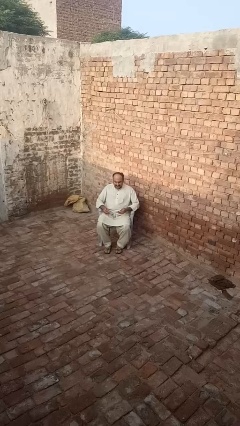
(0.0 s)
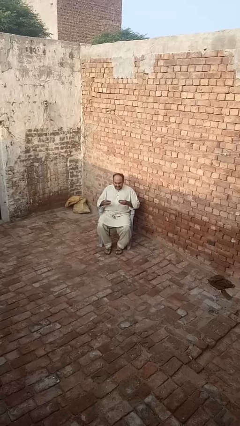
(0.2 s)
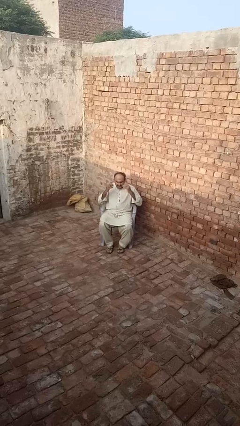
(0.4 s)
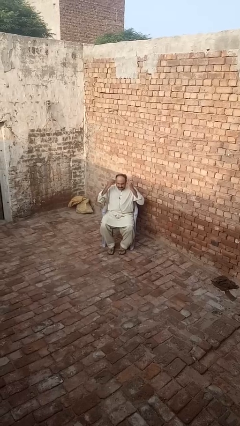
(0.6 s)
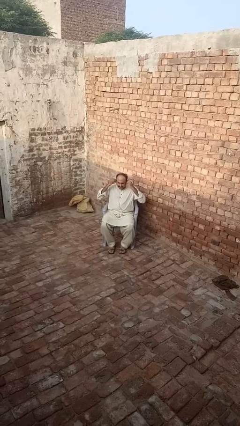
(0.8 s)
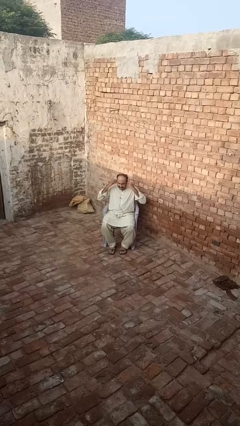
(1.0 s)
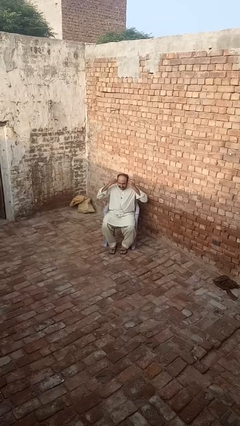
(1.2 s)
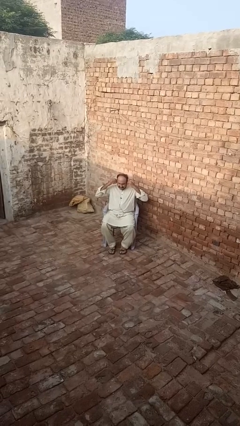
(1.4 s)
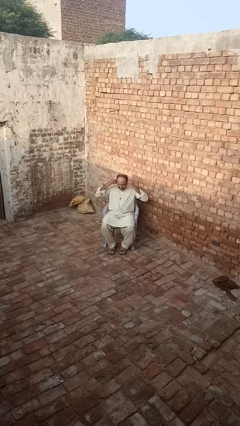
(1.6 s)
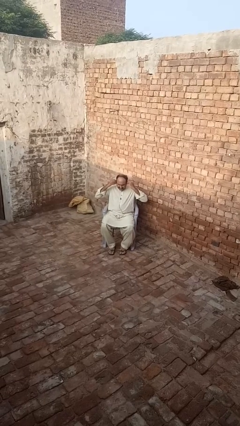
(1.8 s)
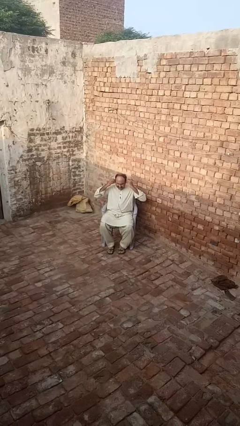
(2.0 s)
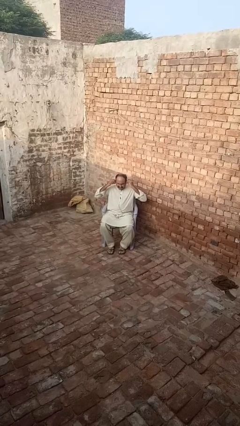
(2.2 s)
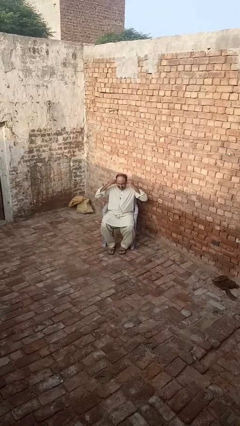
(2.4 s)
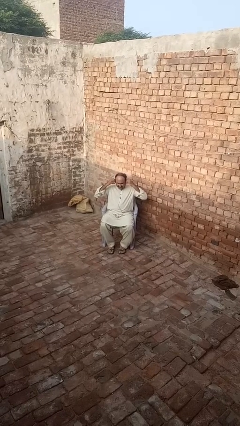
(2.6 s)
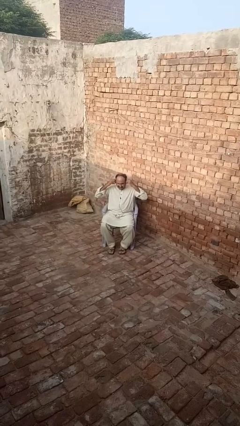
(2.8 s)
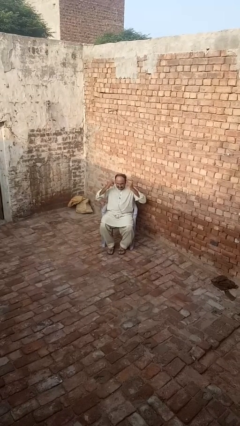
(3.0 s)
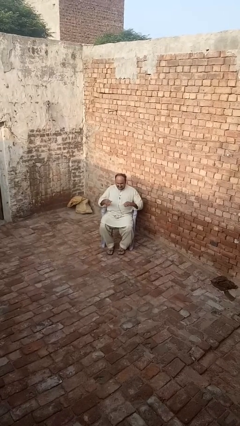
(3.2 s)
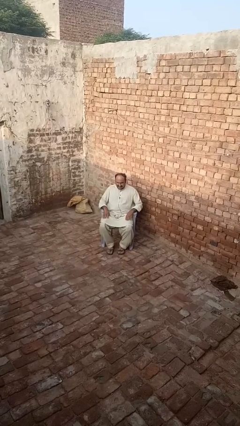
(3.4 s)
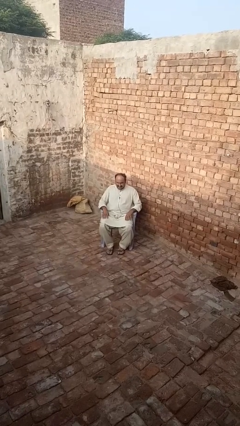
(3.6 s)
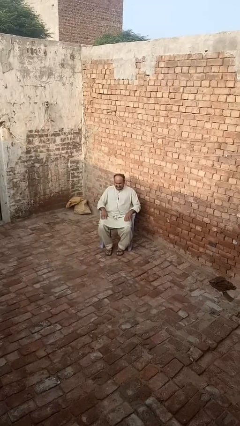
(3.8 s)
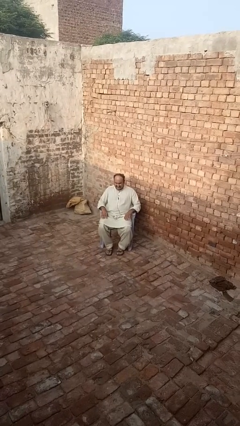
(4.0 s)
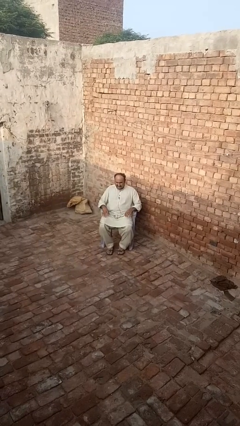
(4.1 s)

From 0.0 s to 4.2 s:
person puts on headphones

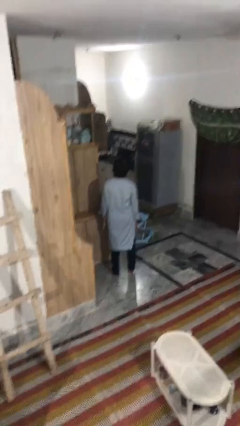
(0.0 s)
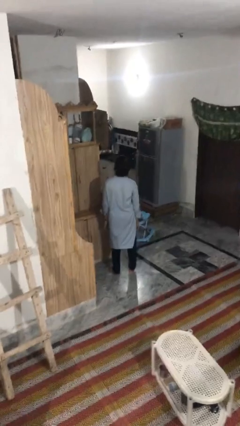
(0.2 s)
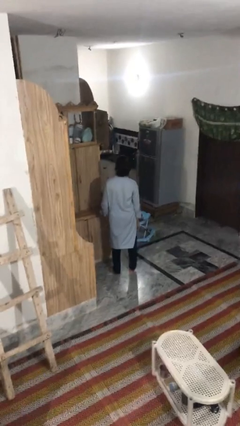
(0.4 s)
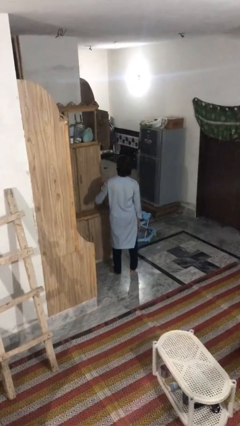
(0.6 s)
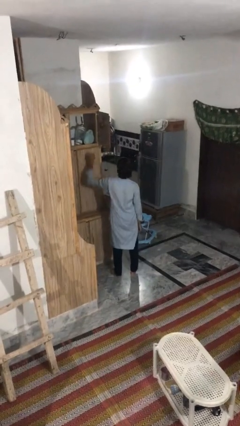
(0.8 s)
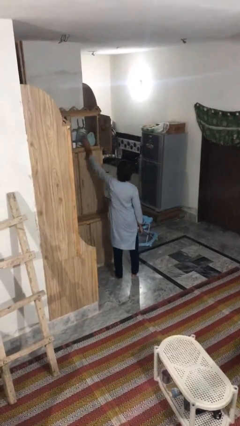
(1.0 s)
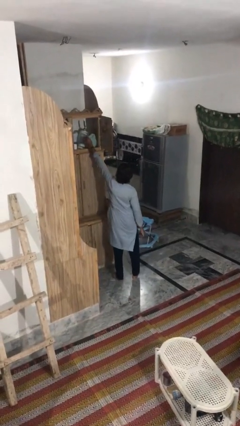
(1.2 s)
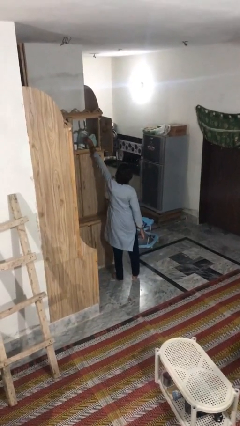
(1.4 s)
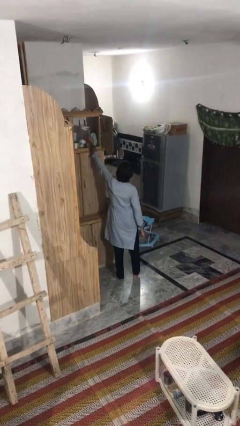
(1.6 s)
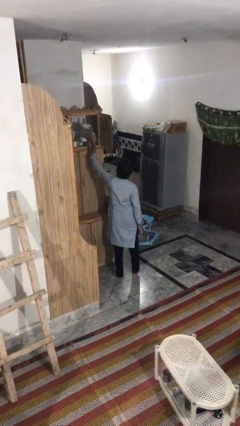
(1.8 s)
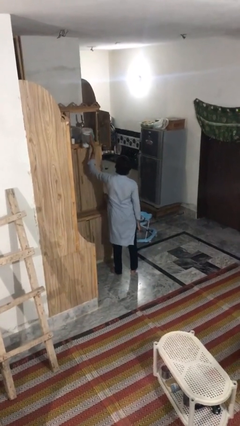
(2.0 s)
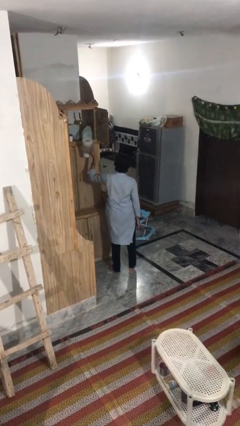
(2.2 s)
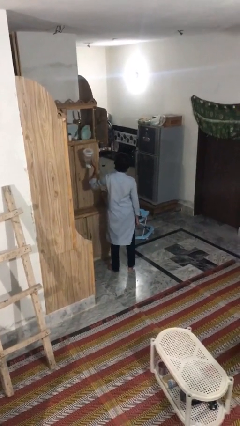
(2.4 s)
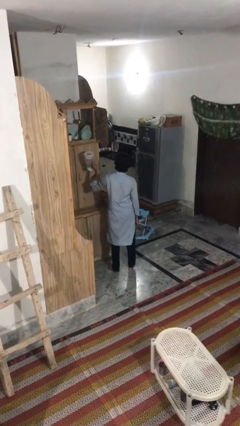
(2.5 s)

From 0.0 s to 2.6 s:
person picks up object from shelf

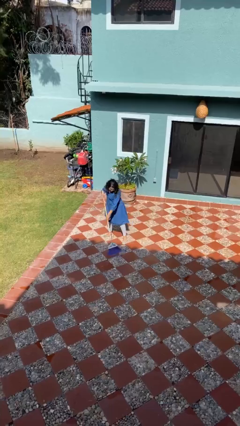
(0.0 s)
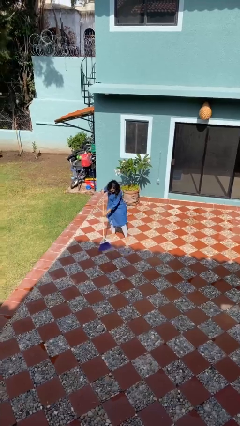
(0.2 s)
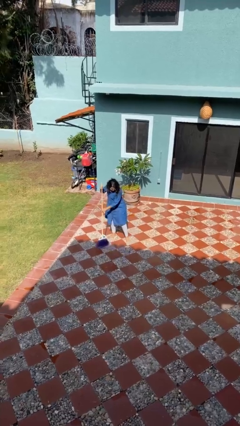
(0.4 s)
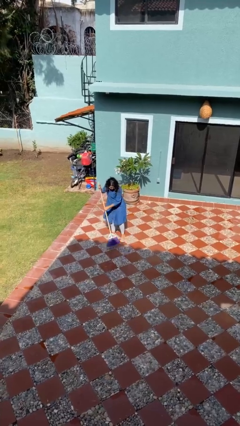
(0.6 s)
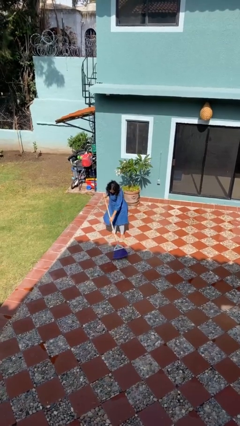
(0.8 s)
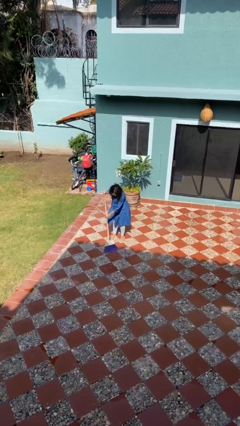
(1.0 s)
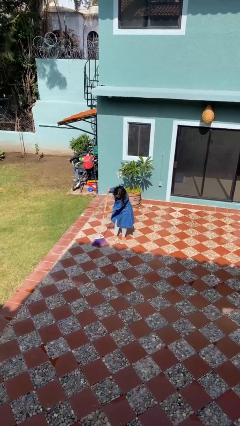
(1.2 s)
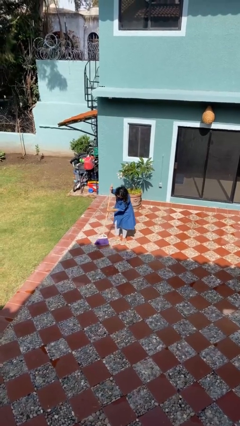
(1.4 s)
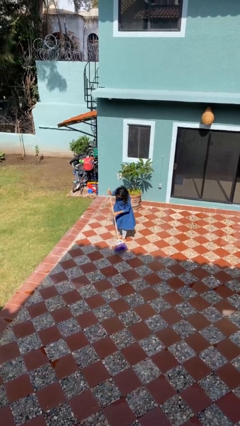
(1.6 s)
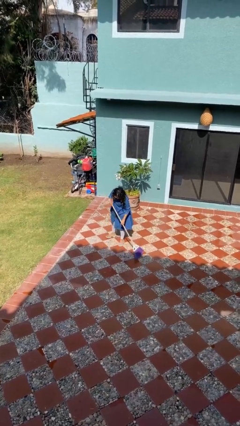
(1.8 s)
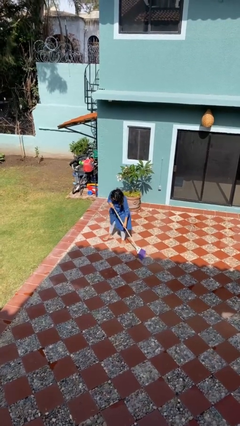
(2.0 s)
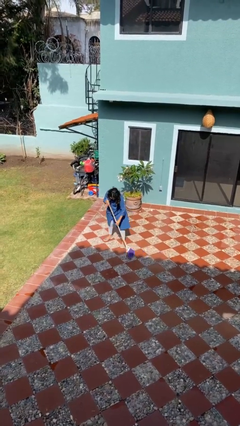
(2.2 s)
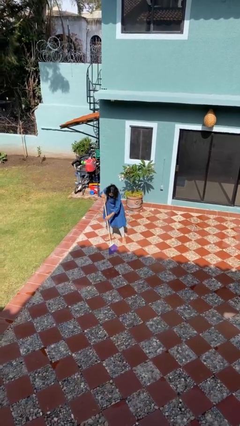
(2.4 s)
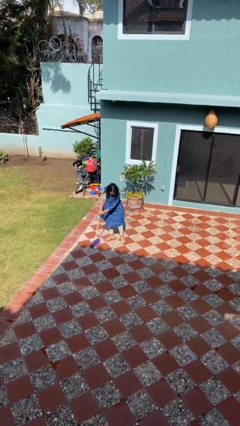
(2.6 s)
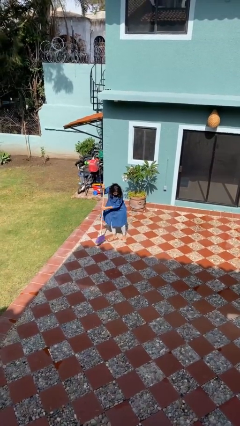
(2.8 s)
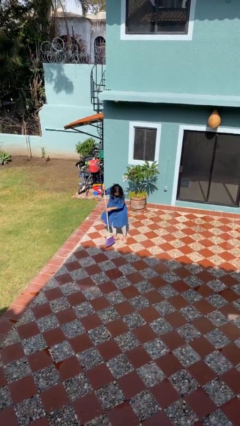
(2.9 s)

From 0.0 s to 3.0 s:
person sweeps floor

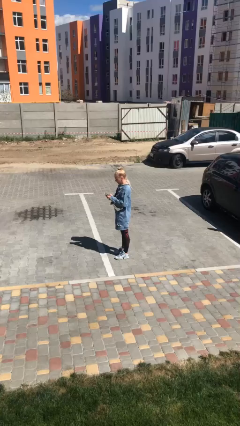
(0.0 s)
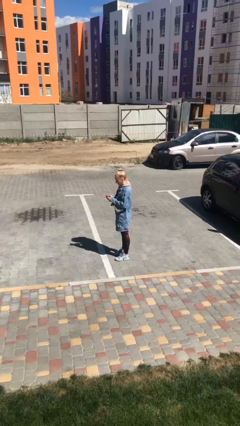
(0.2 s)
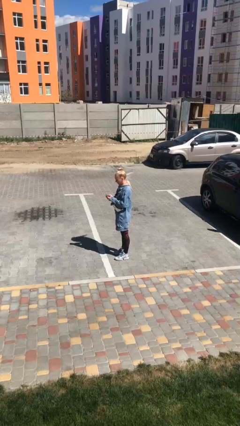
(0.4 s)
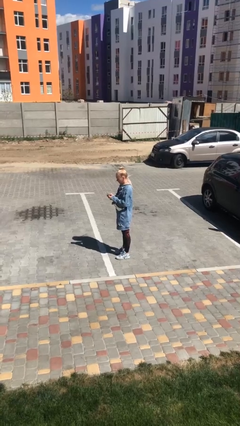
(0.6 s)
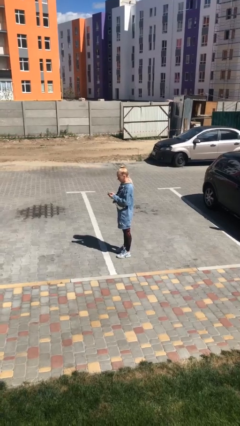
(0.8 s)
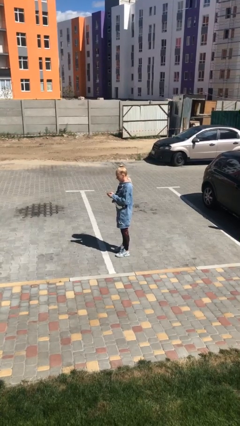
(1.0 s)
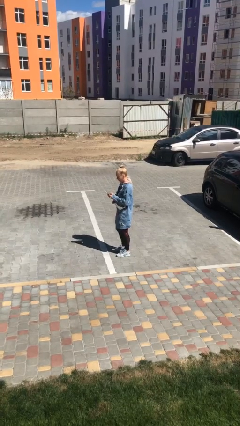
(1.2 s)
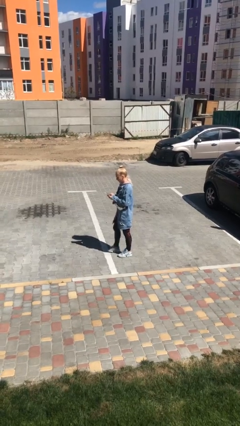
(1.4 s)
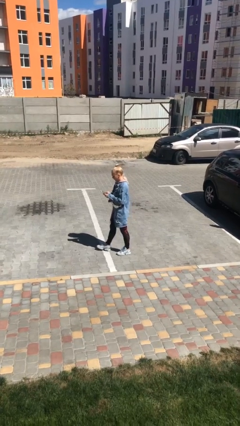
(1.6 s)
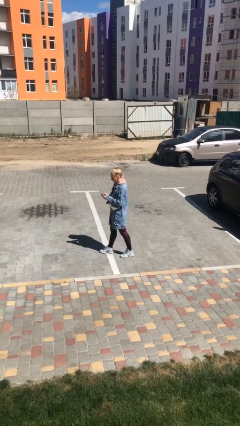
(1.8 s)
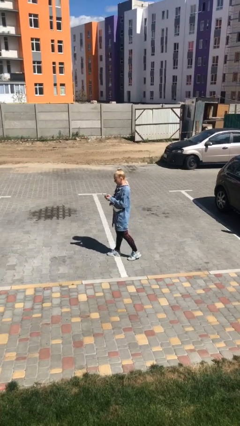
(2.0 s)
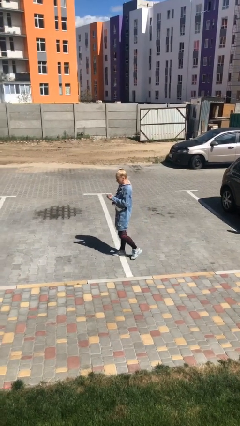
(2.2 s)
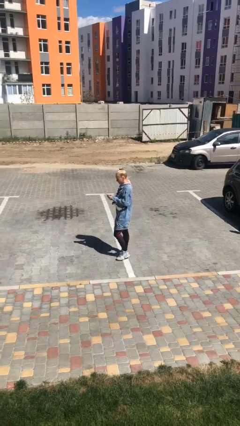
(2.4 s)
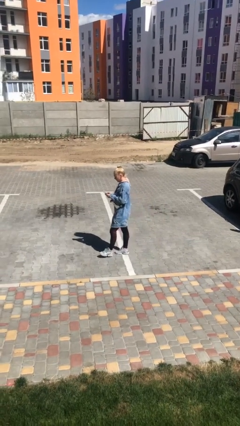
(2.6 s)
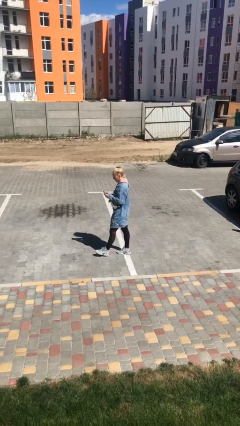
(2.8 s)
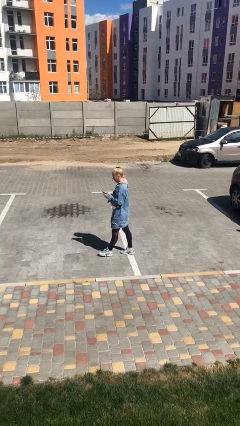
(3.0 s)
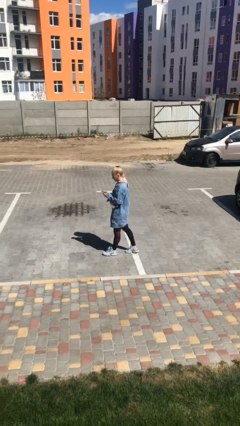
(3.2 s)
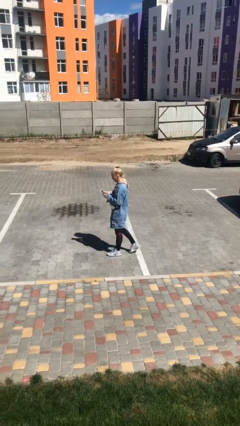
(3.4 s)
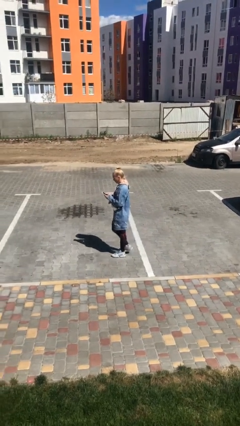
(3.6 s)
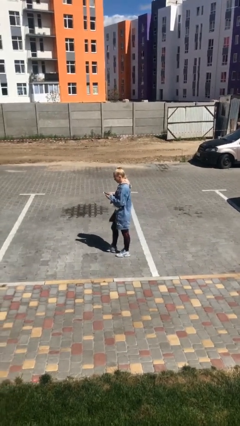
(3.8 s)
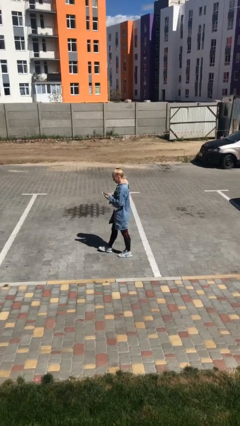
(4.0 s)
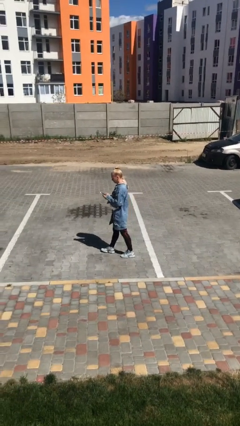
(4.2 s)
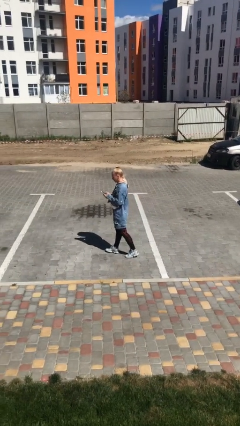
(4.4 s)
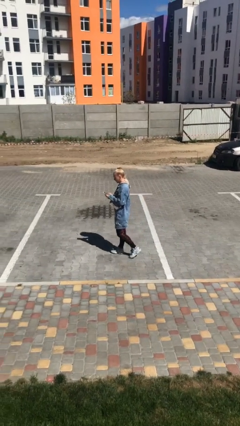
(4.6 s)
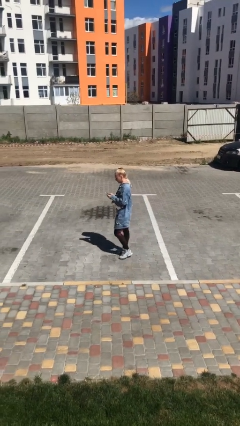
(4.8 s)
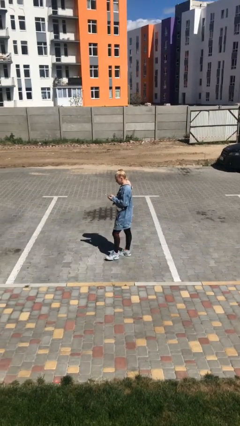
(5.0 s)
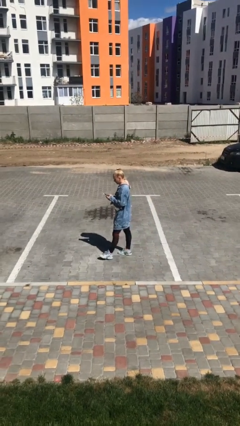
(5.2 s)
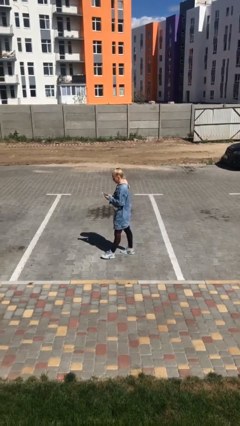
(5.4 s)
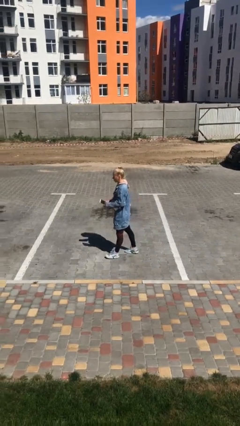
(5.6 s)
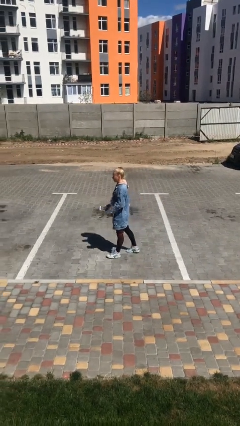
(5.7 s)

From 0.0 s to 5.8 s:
person texts on phone

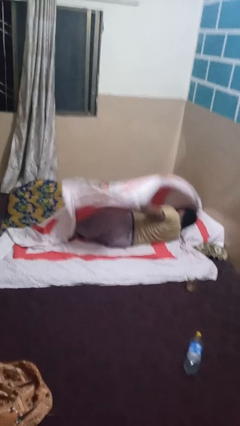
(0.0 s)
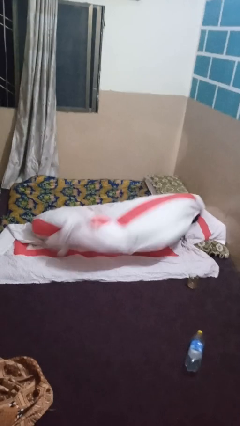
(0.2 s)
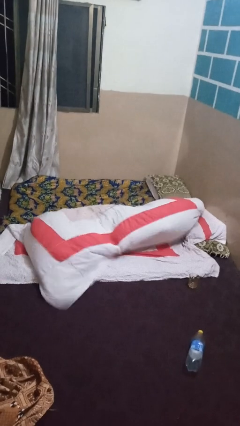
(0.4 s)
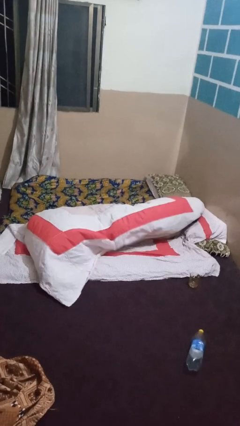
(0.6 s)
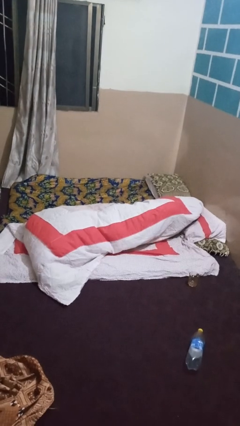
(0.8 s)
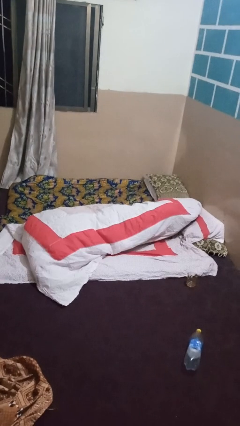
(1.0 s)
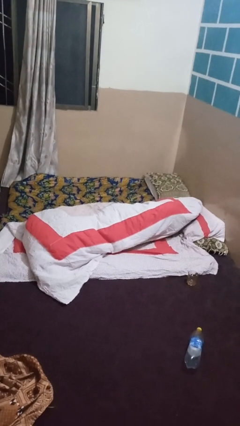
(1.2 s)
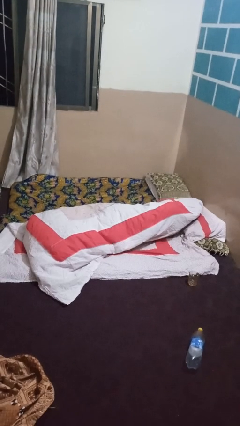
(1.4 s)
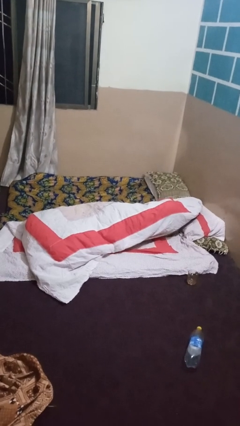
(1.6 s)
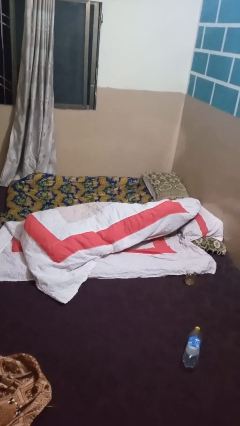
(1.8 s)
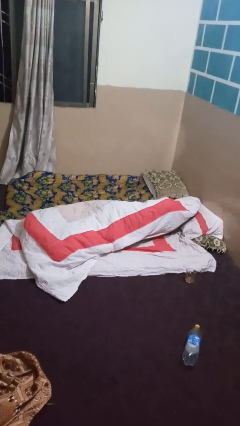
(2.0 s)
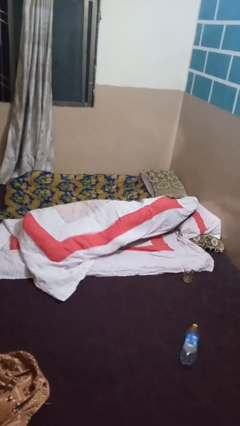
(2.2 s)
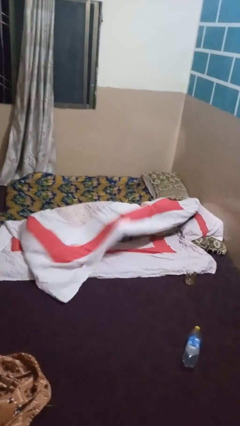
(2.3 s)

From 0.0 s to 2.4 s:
person covers with bedsheets
